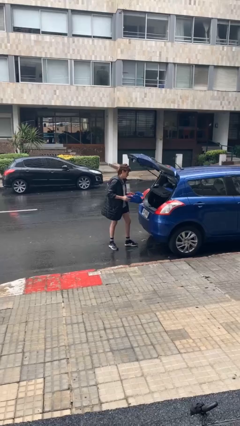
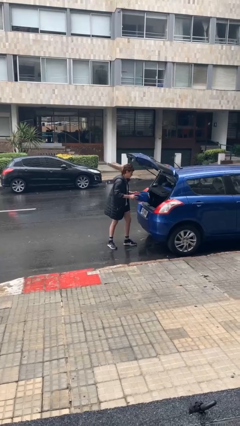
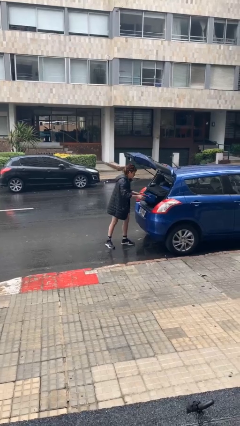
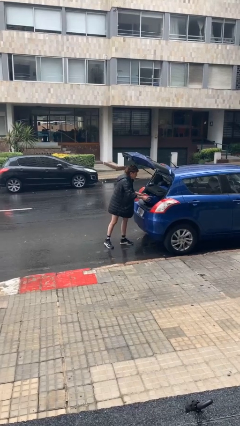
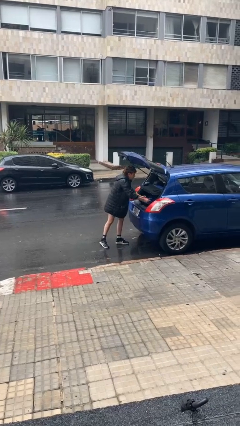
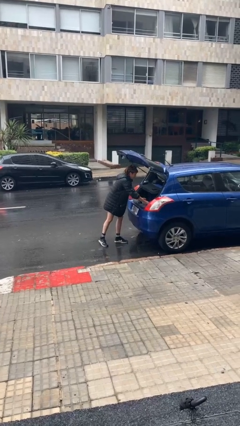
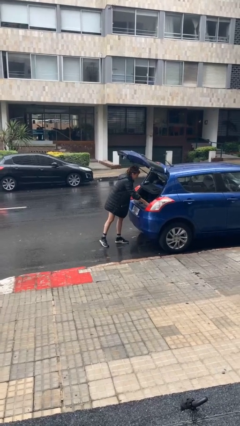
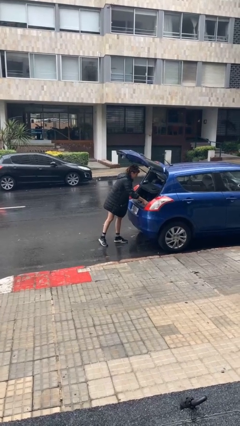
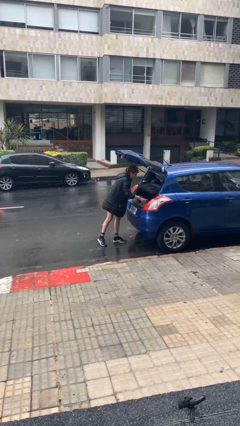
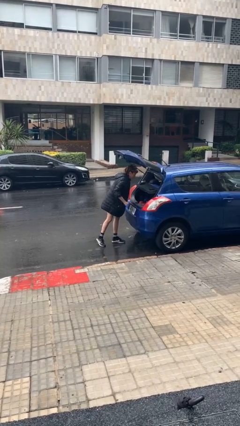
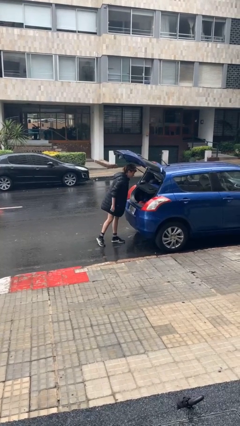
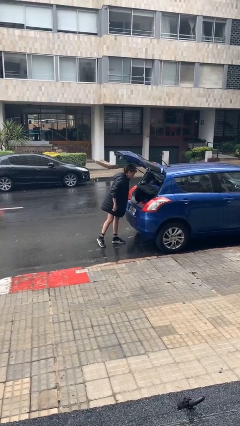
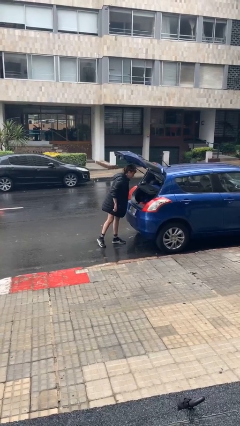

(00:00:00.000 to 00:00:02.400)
person loads car

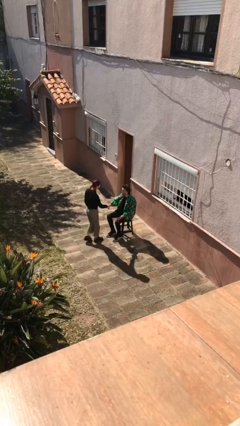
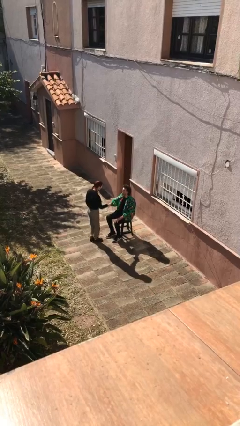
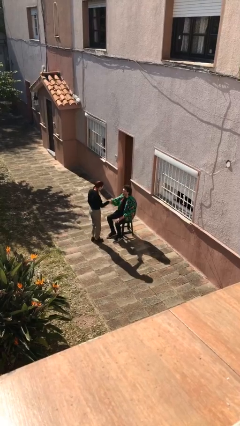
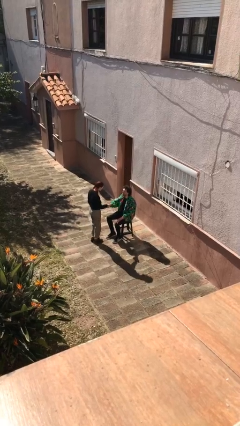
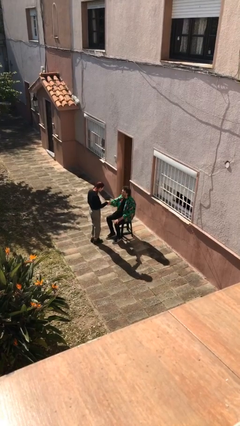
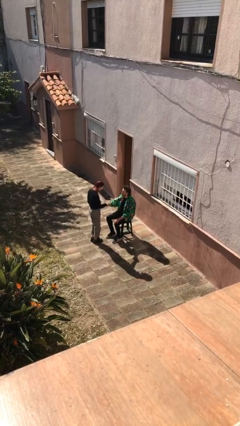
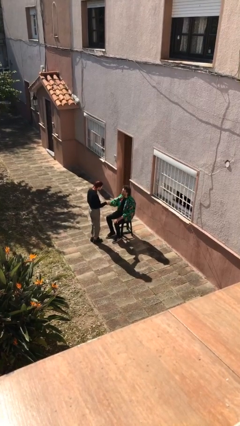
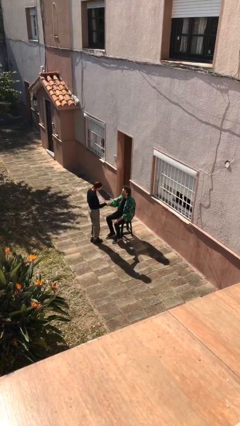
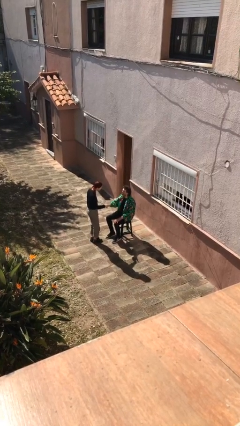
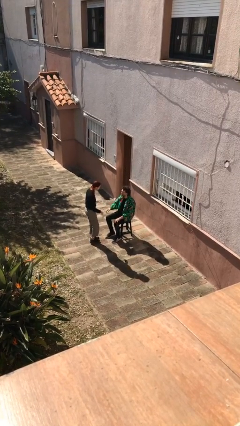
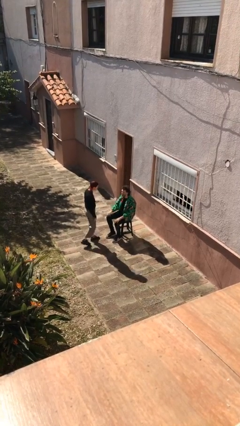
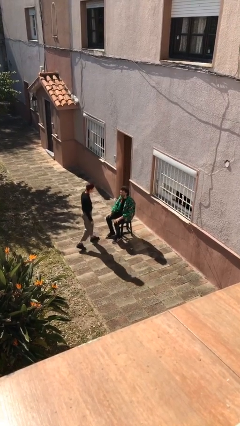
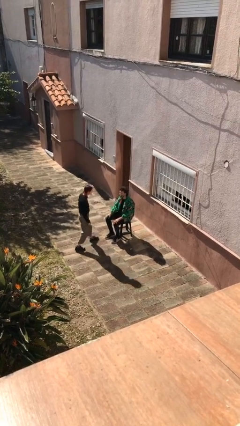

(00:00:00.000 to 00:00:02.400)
person shakes hand

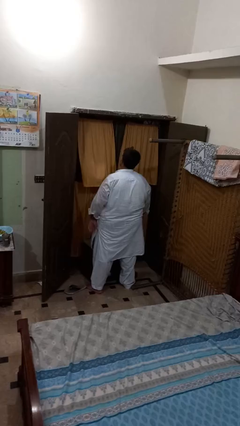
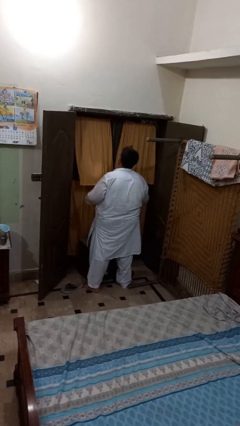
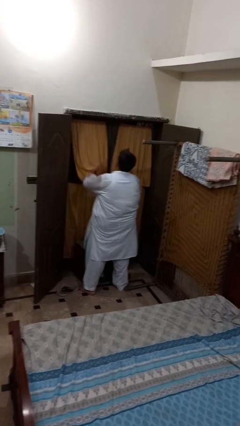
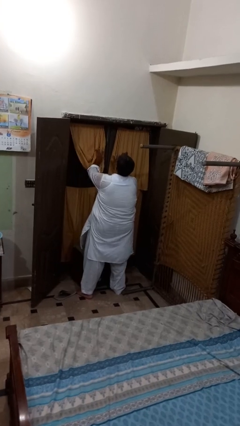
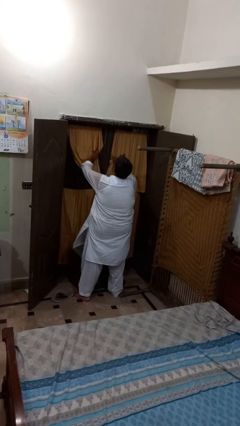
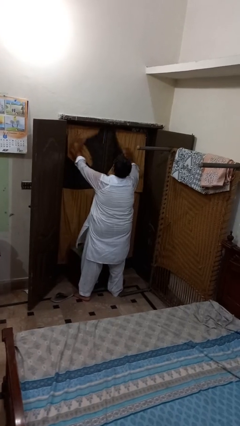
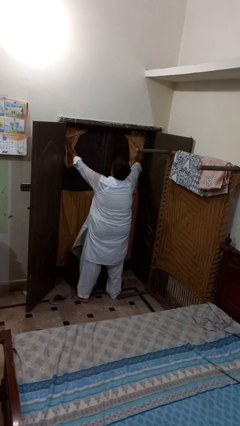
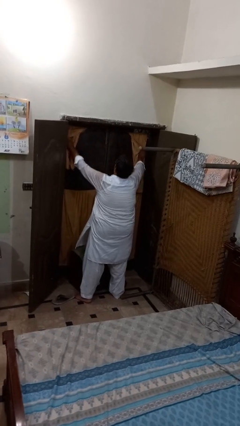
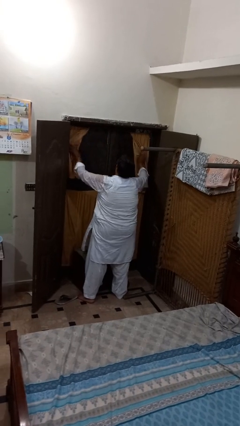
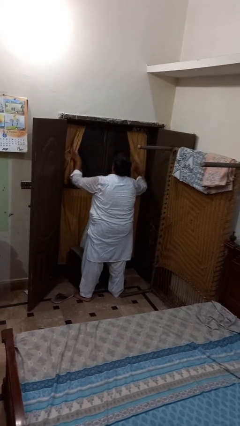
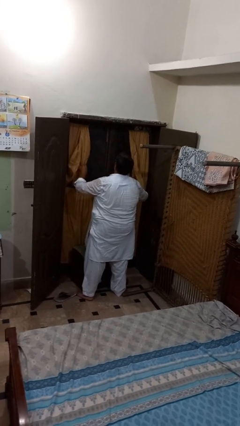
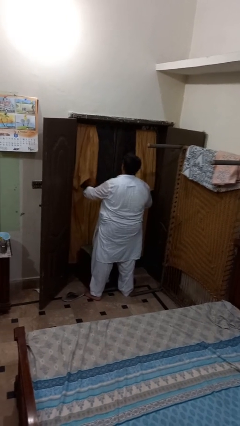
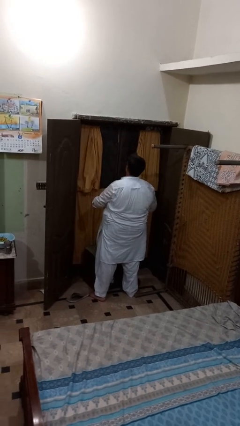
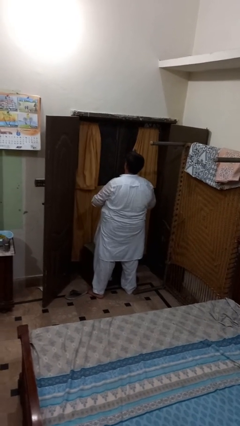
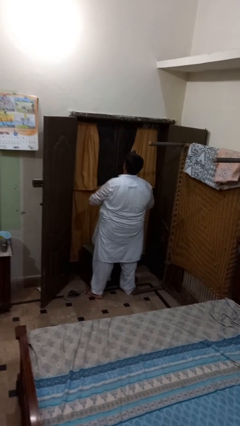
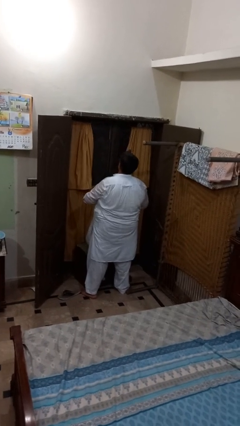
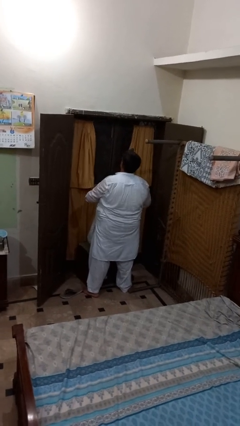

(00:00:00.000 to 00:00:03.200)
person opens curtains

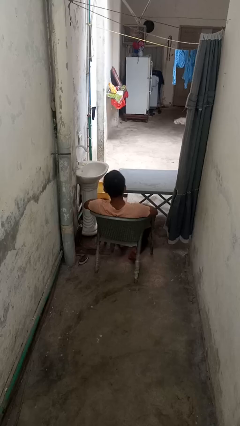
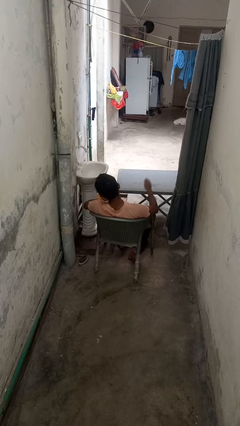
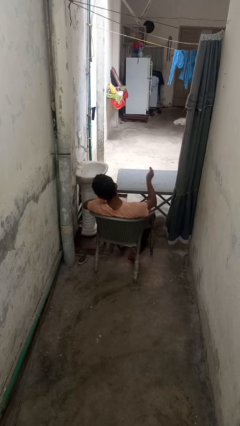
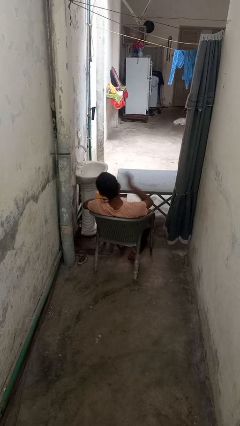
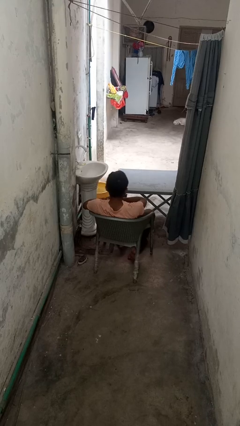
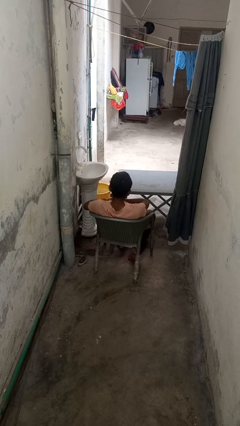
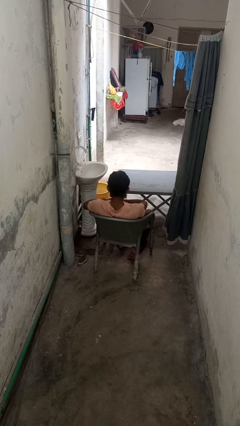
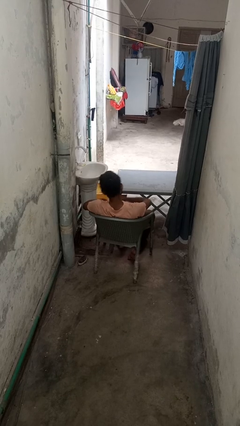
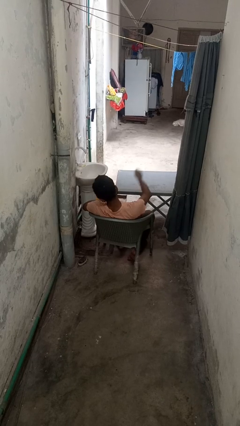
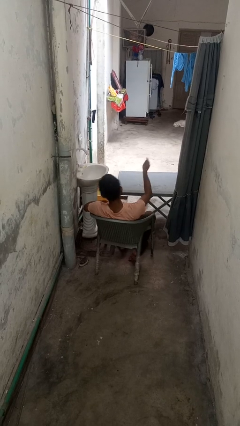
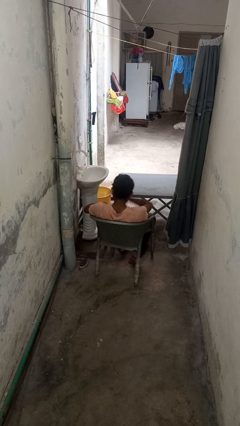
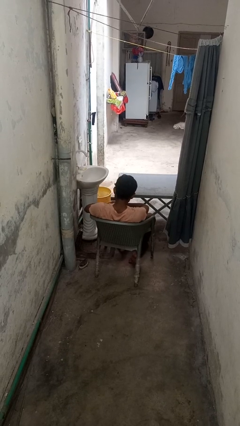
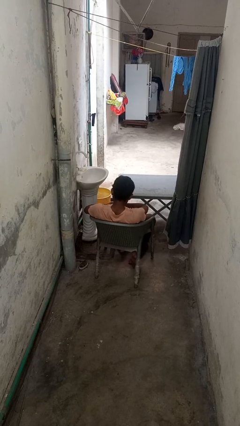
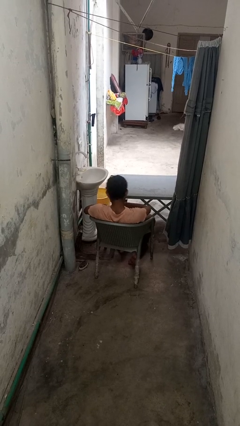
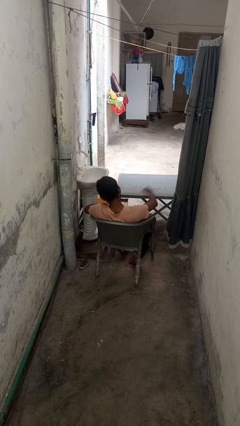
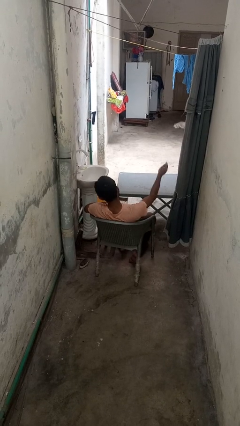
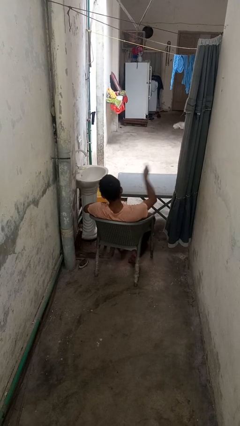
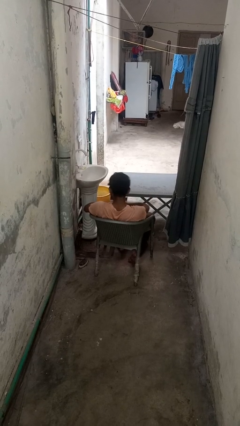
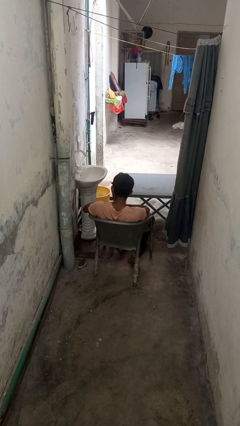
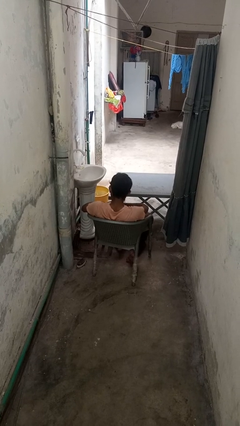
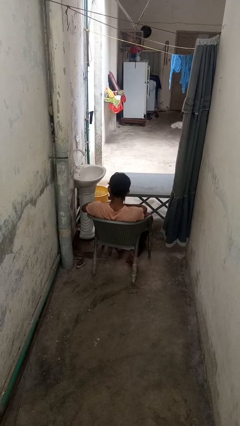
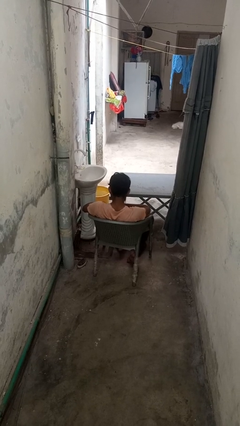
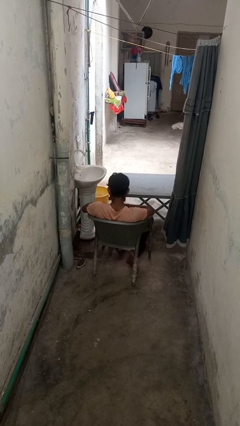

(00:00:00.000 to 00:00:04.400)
person drums on chest

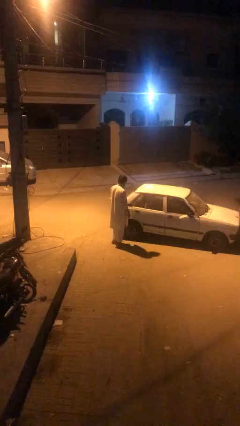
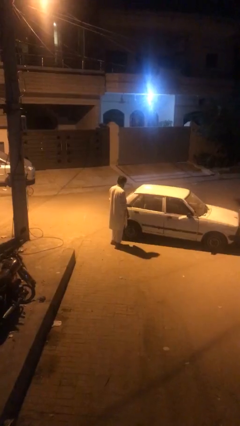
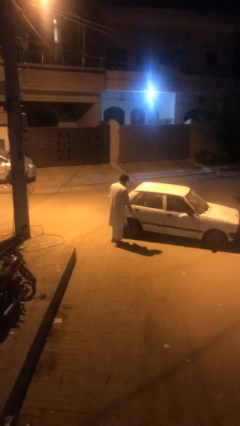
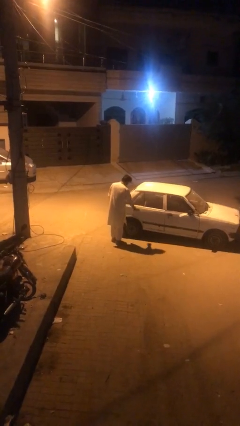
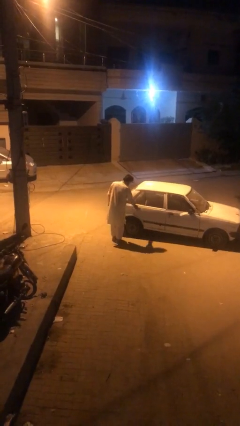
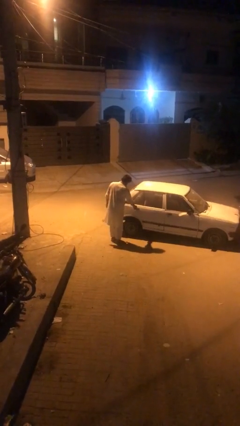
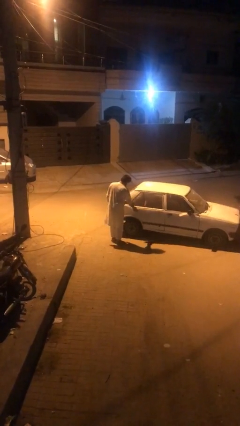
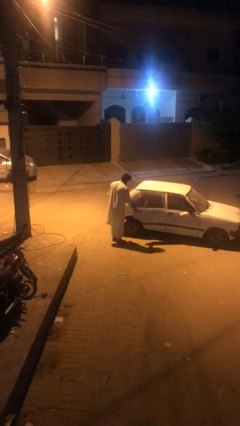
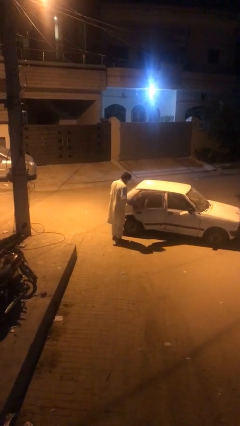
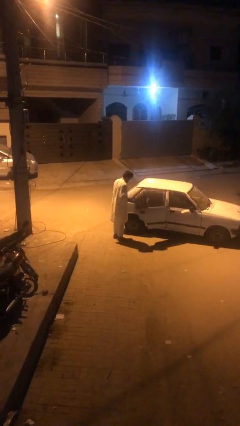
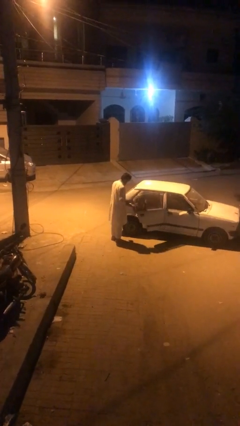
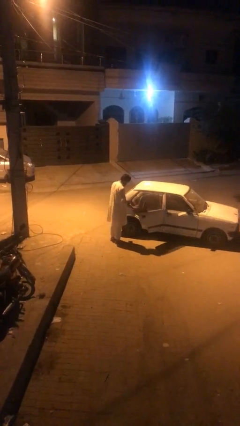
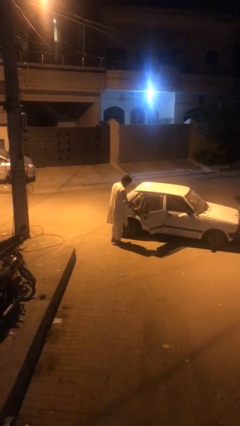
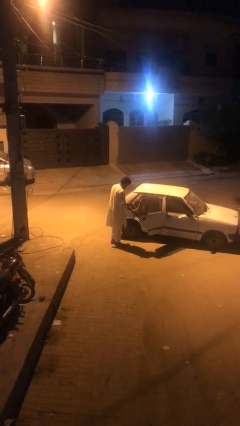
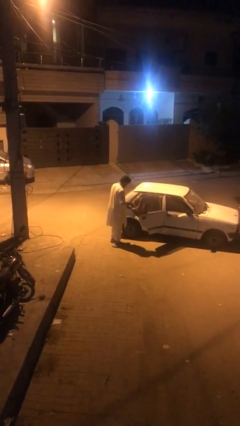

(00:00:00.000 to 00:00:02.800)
person opens car door

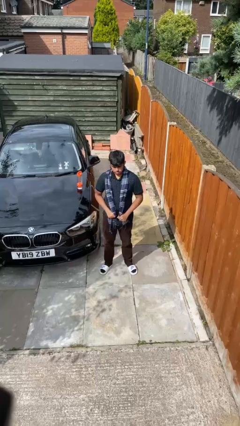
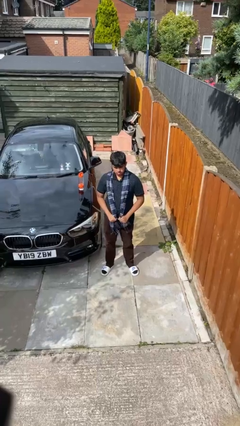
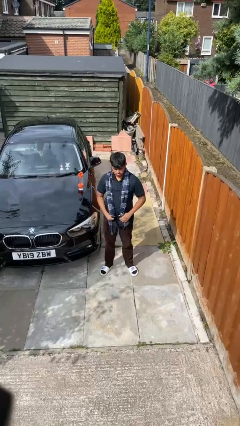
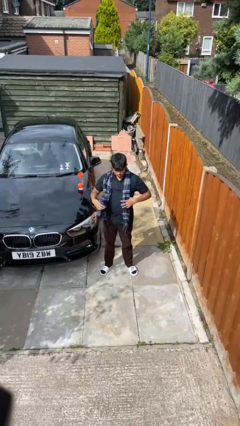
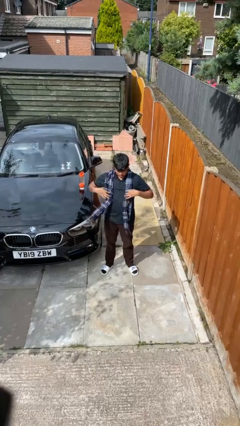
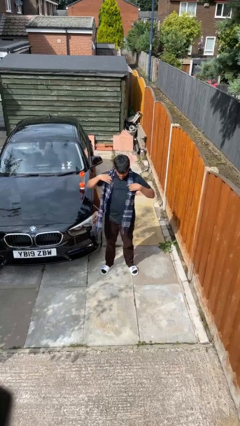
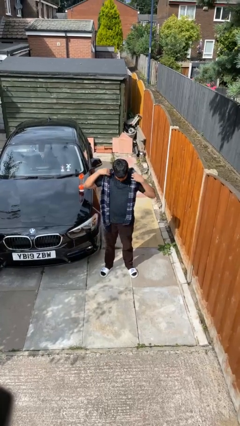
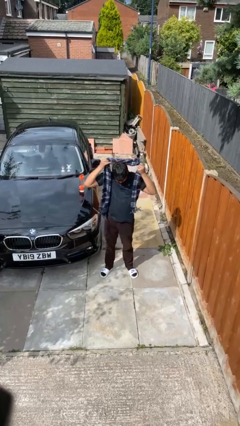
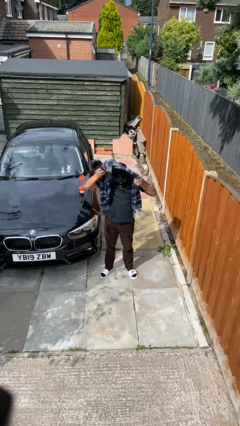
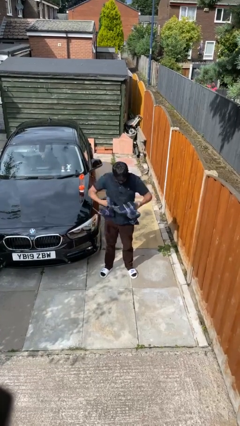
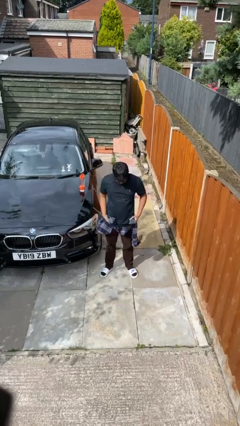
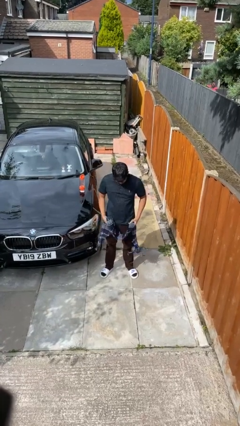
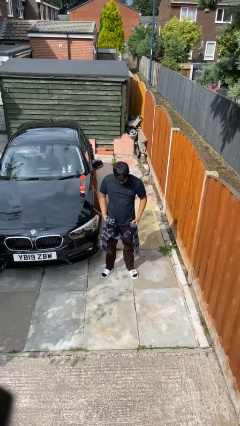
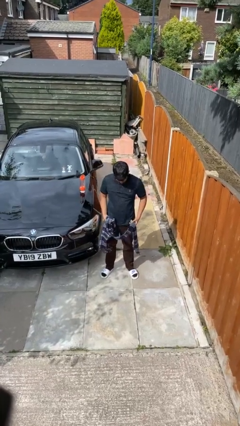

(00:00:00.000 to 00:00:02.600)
person takes off scarf
